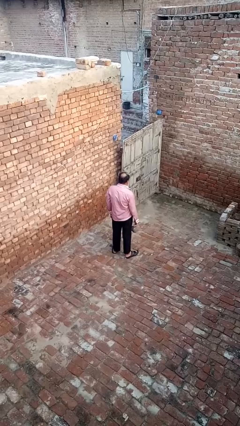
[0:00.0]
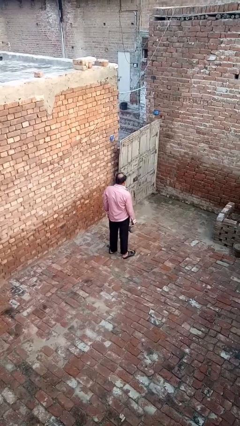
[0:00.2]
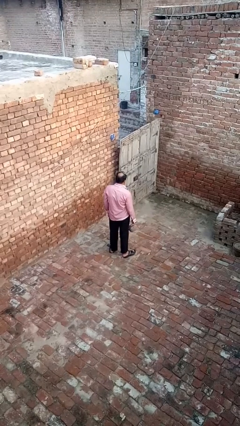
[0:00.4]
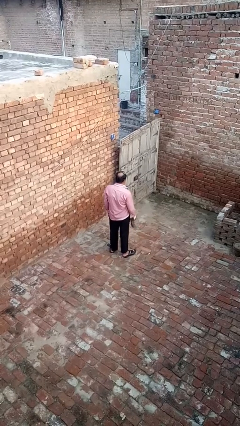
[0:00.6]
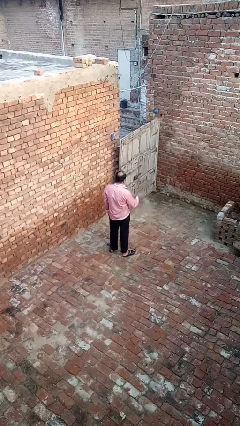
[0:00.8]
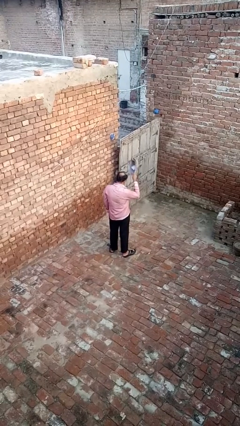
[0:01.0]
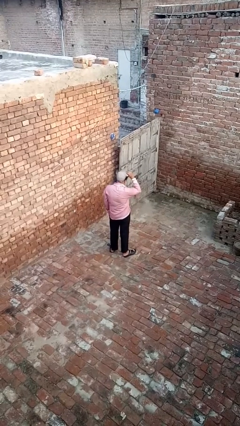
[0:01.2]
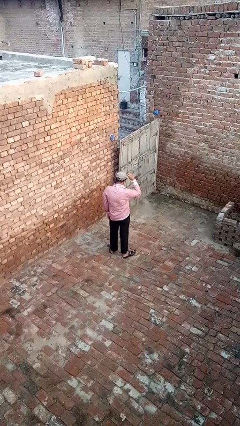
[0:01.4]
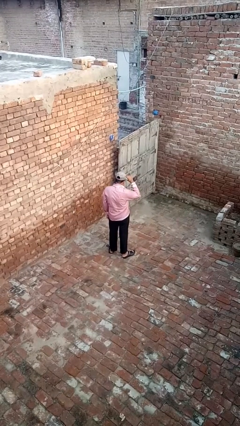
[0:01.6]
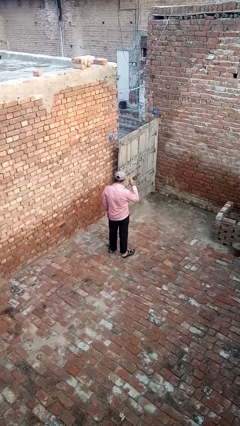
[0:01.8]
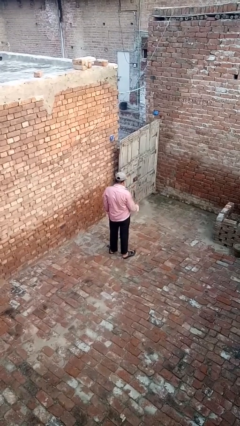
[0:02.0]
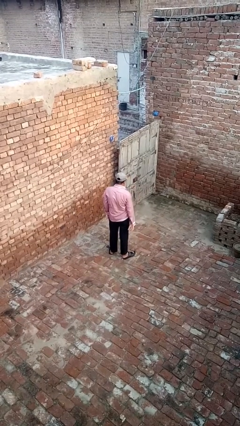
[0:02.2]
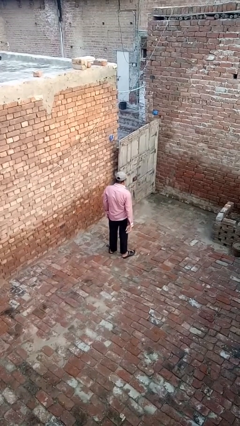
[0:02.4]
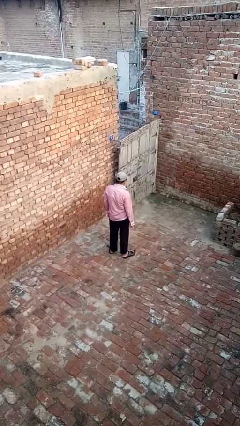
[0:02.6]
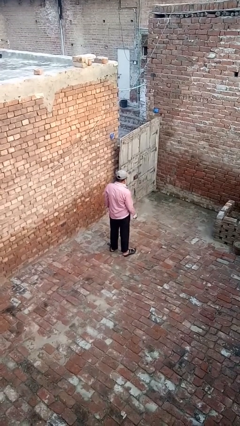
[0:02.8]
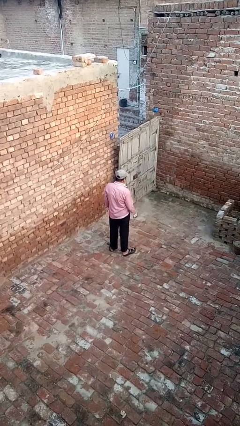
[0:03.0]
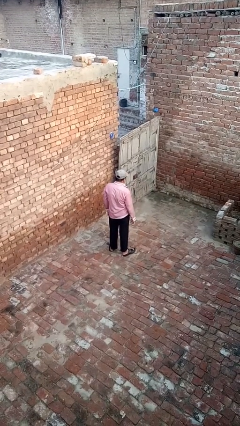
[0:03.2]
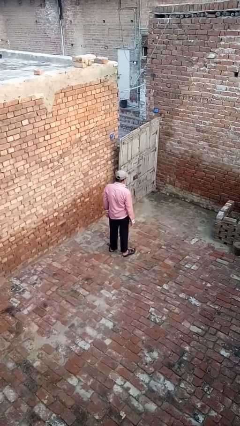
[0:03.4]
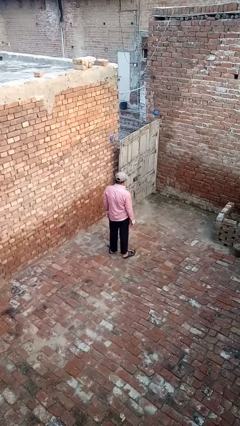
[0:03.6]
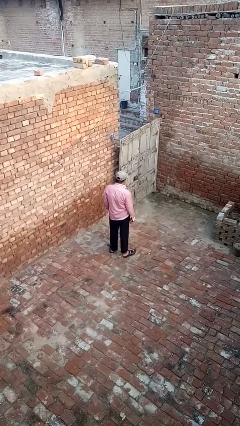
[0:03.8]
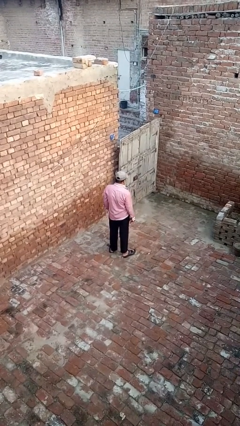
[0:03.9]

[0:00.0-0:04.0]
person puts on hat

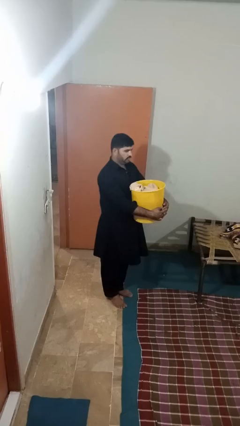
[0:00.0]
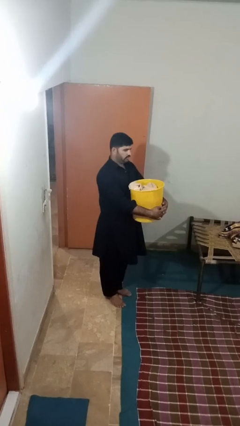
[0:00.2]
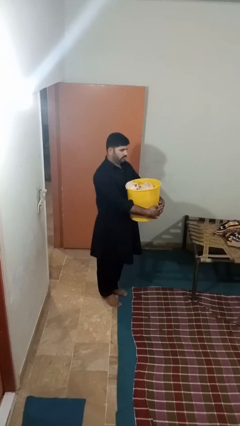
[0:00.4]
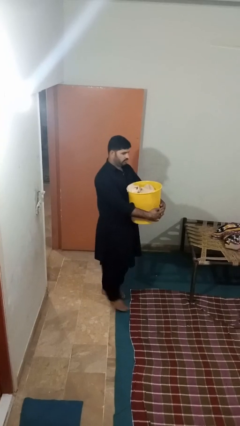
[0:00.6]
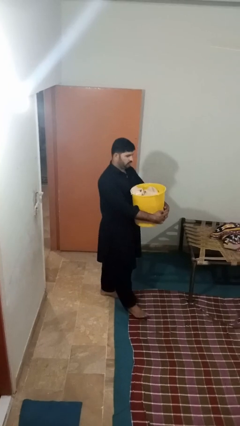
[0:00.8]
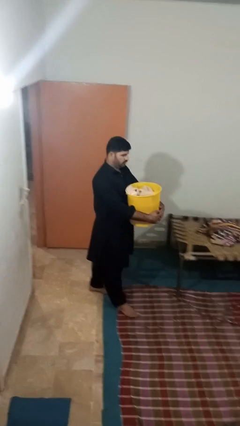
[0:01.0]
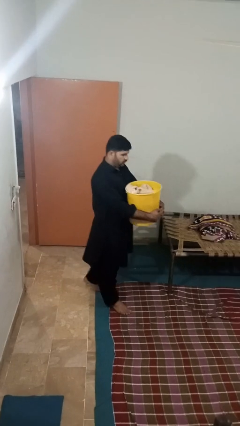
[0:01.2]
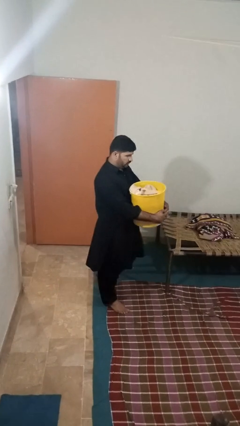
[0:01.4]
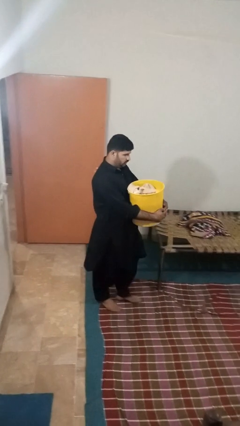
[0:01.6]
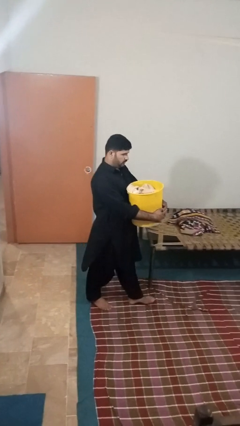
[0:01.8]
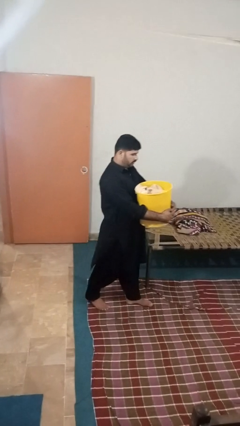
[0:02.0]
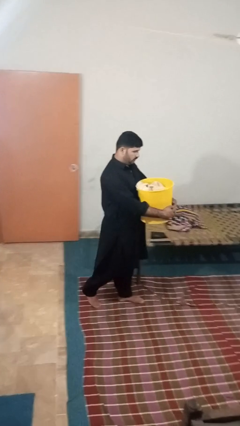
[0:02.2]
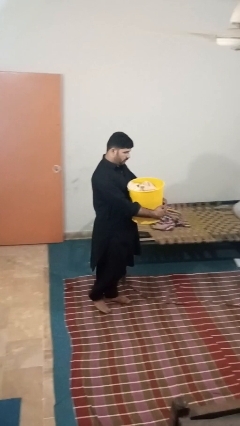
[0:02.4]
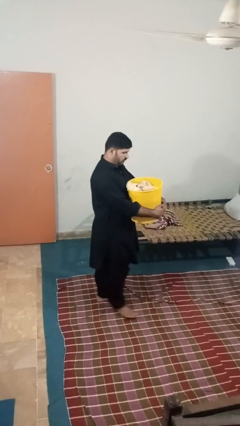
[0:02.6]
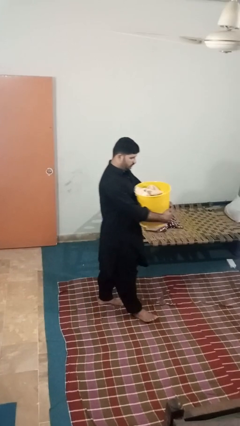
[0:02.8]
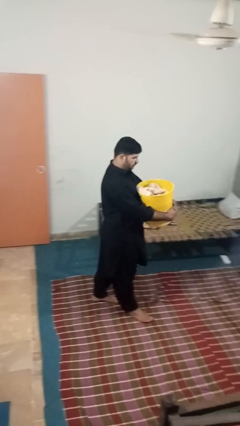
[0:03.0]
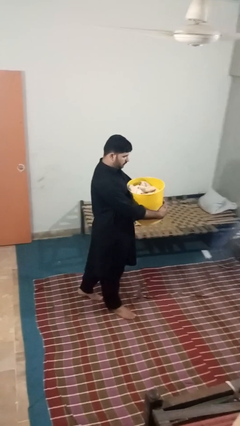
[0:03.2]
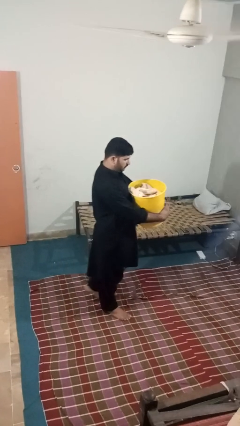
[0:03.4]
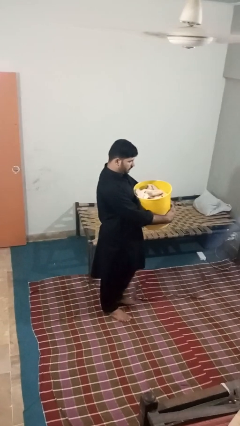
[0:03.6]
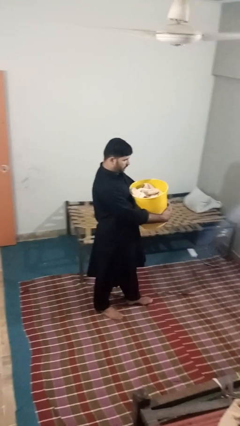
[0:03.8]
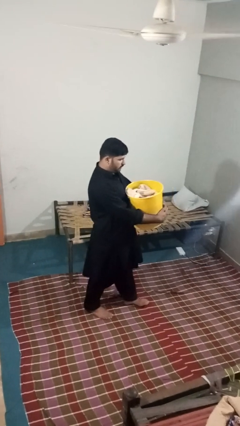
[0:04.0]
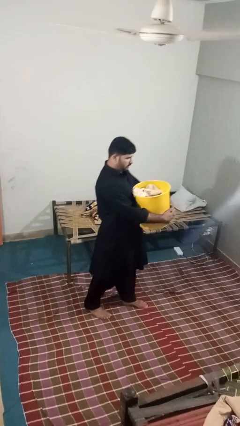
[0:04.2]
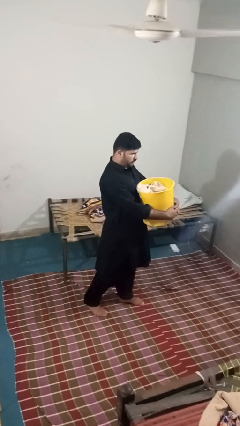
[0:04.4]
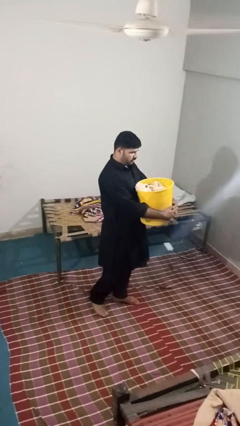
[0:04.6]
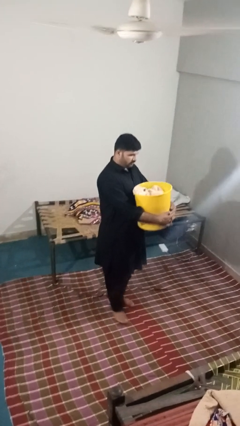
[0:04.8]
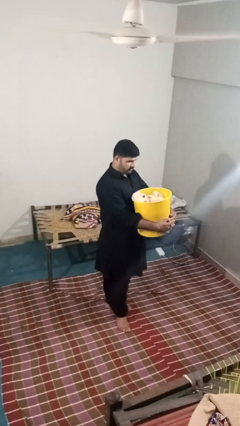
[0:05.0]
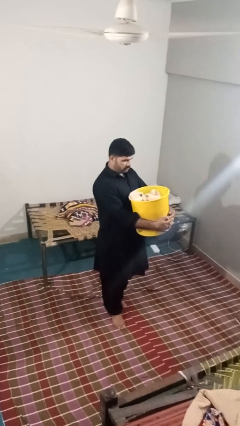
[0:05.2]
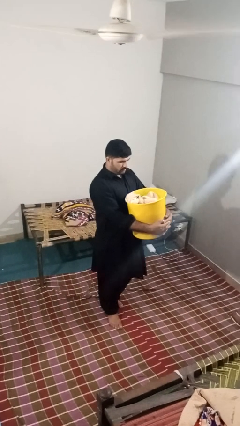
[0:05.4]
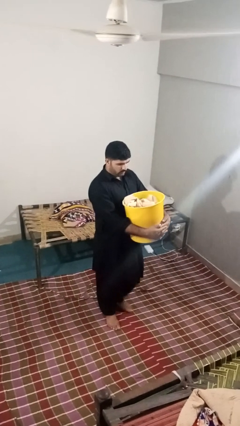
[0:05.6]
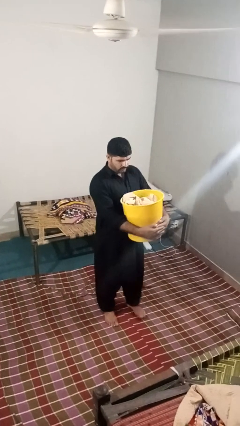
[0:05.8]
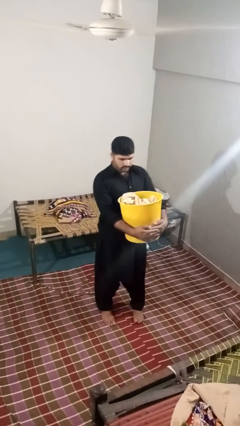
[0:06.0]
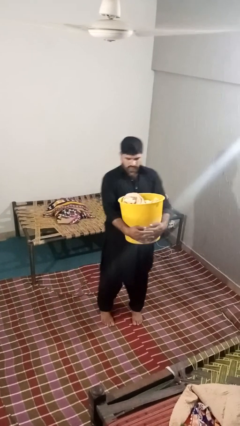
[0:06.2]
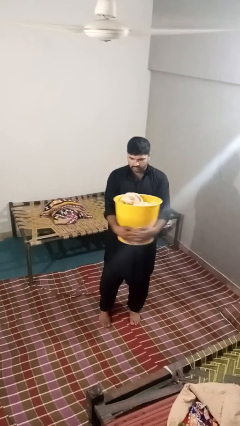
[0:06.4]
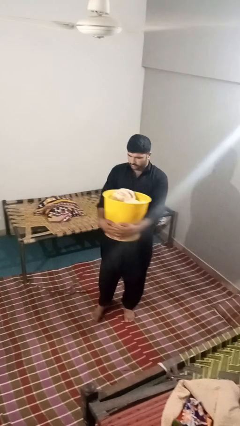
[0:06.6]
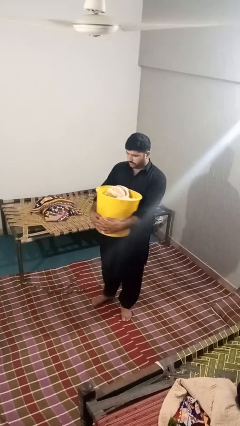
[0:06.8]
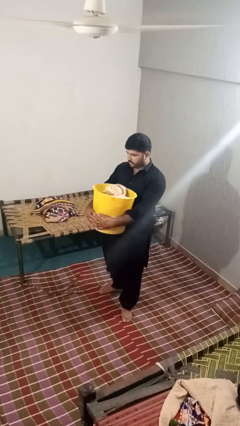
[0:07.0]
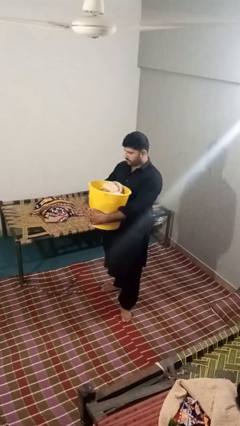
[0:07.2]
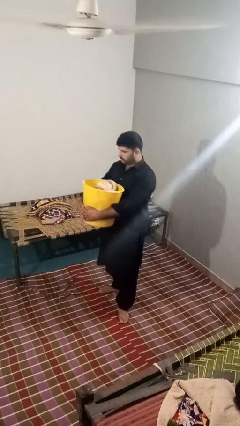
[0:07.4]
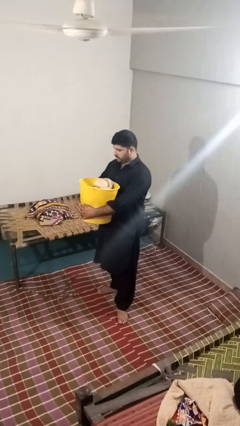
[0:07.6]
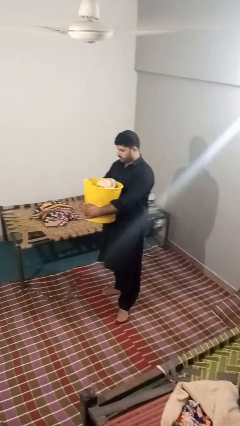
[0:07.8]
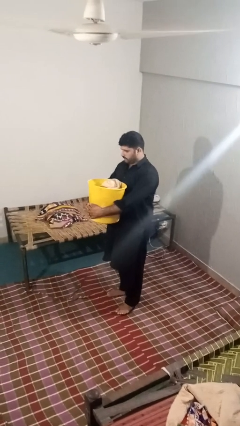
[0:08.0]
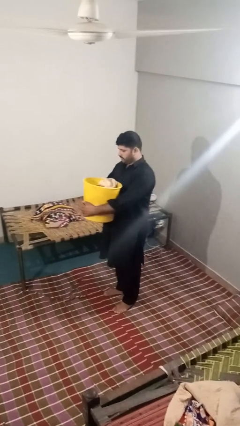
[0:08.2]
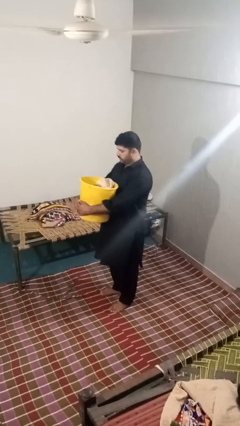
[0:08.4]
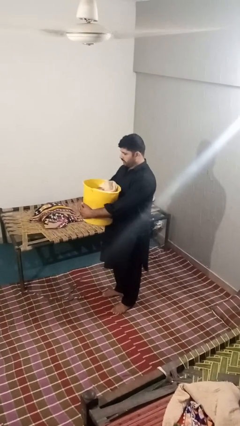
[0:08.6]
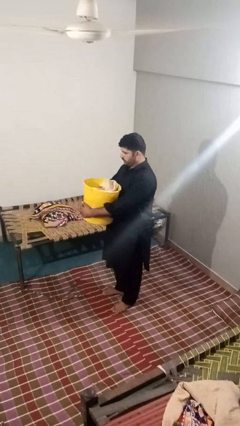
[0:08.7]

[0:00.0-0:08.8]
person carries laundry basket

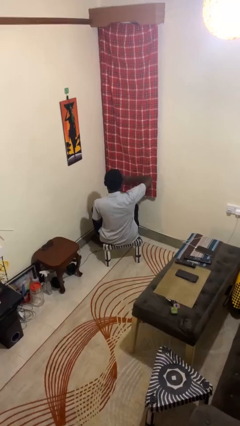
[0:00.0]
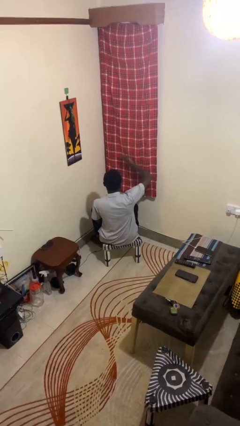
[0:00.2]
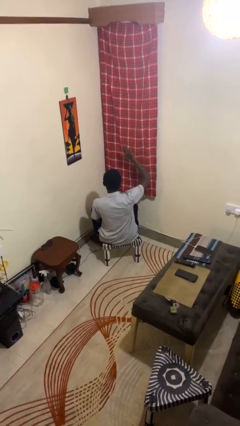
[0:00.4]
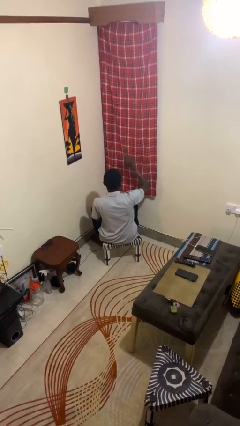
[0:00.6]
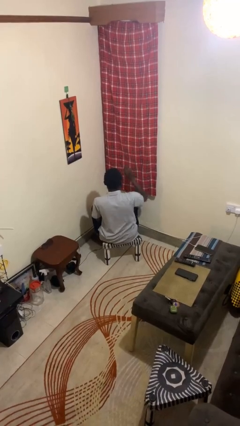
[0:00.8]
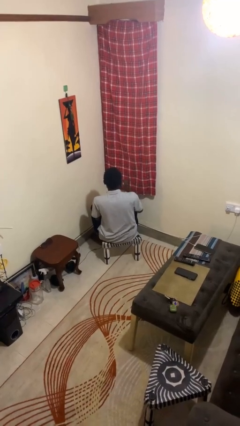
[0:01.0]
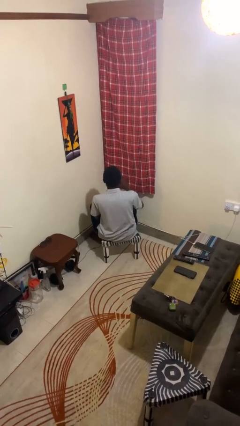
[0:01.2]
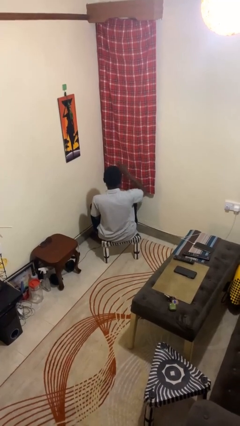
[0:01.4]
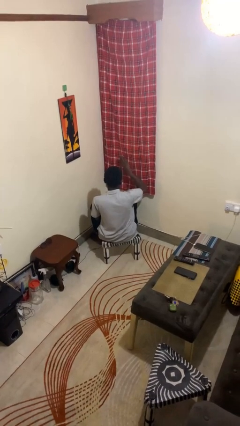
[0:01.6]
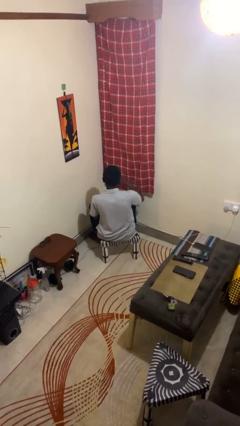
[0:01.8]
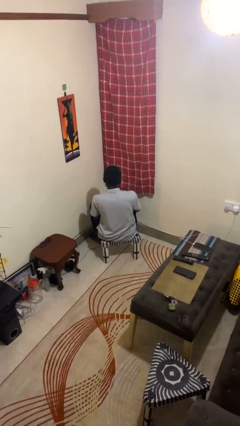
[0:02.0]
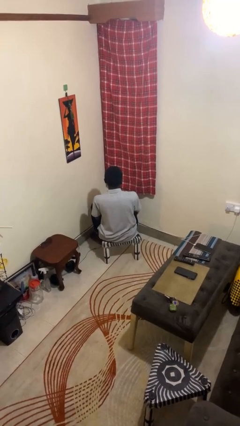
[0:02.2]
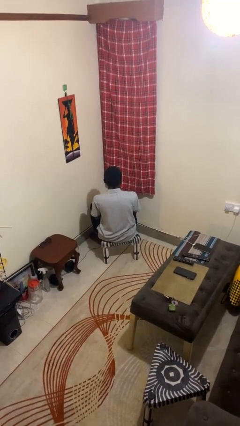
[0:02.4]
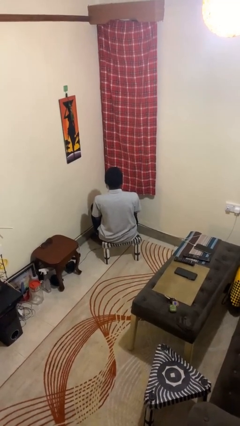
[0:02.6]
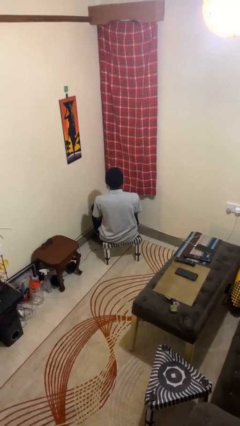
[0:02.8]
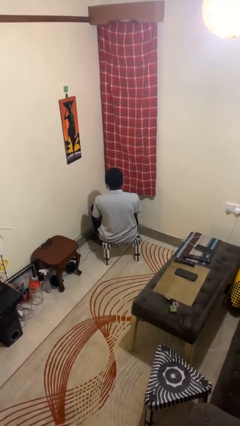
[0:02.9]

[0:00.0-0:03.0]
person gestures swipe down

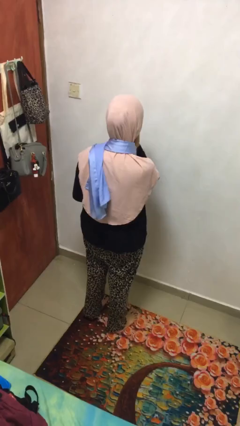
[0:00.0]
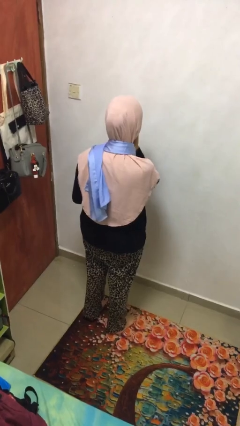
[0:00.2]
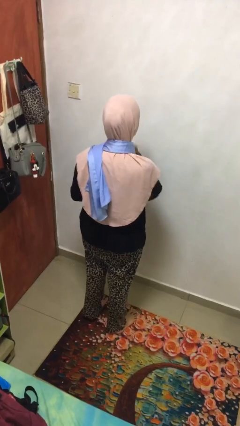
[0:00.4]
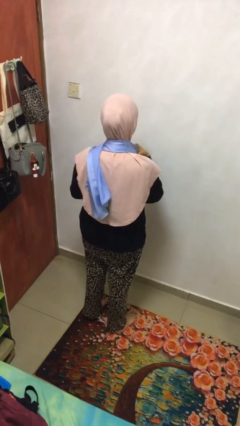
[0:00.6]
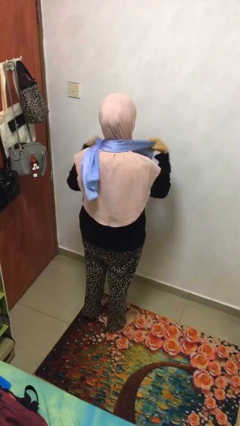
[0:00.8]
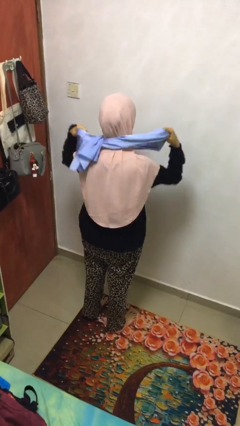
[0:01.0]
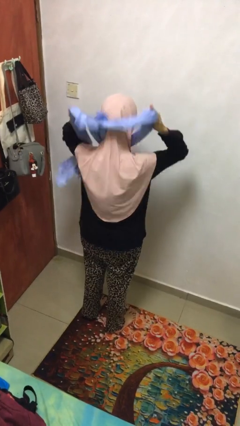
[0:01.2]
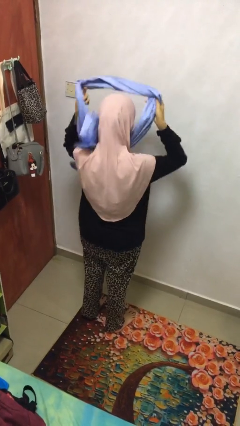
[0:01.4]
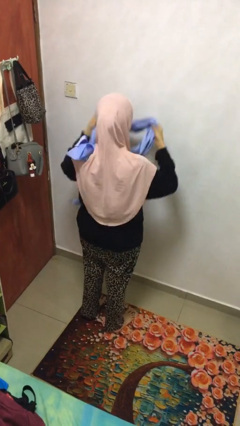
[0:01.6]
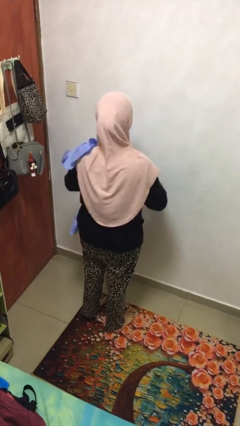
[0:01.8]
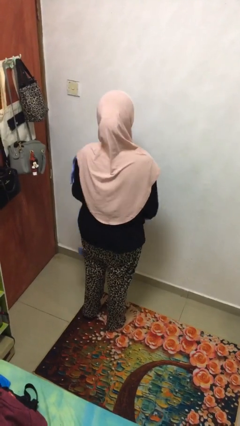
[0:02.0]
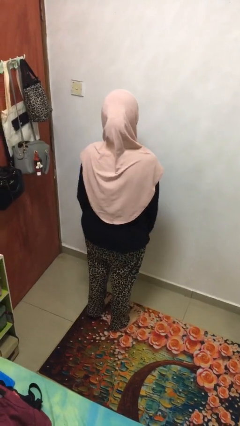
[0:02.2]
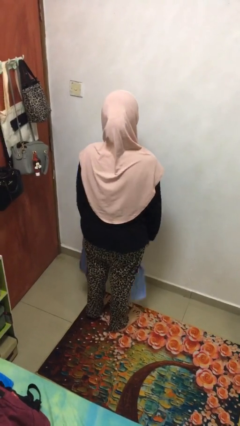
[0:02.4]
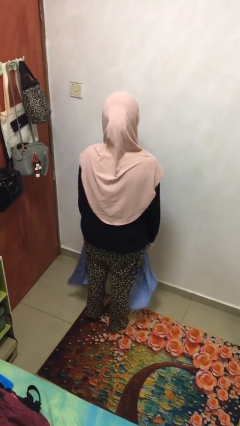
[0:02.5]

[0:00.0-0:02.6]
person takes off scarf
